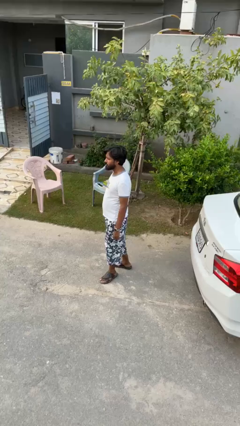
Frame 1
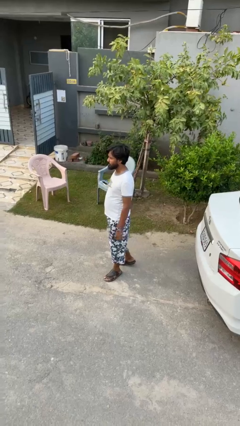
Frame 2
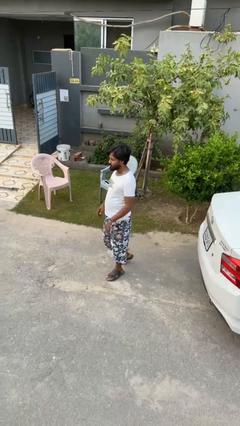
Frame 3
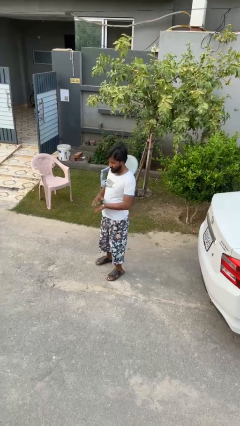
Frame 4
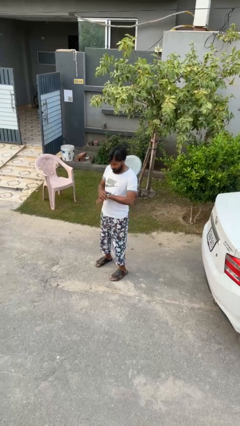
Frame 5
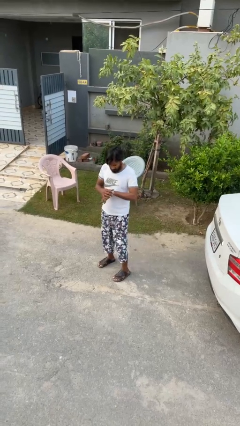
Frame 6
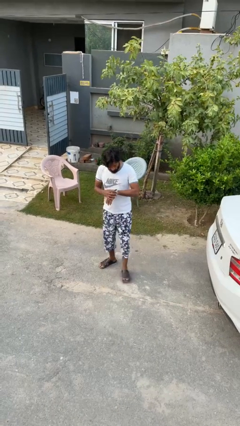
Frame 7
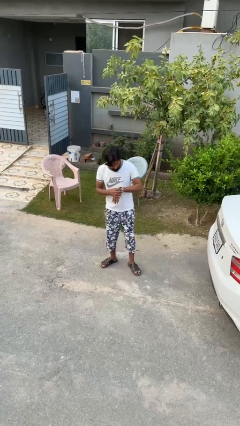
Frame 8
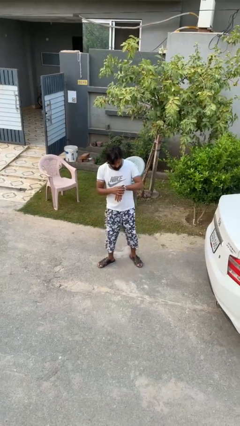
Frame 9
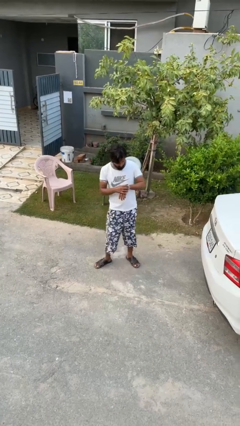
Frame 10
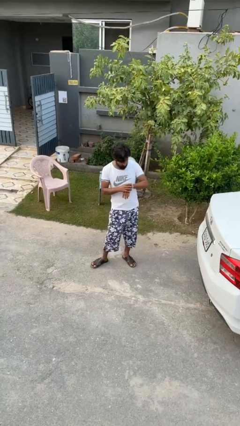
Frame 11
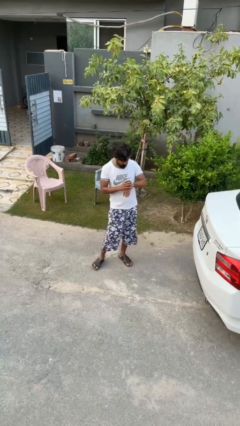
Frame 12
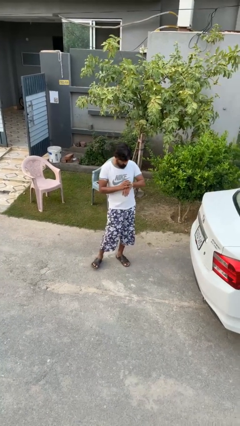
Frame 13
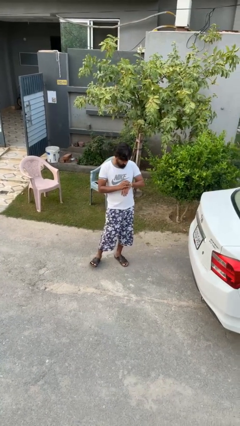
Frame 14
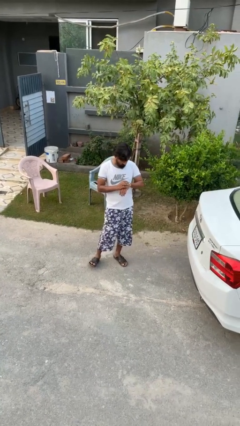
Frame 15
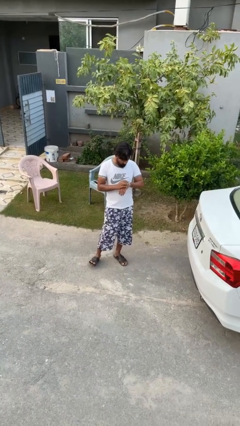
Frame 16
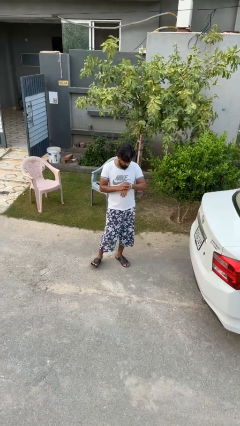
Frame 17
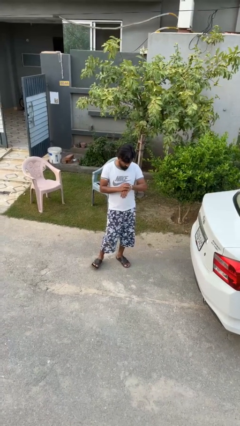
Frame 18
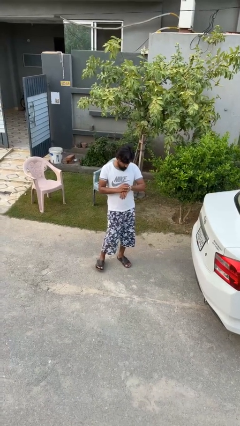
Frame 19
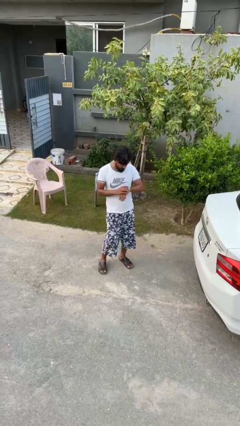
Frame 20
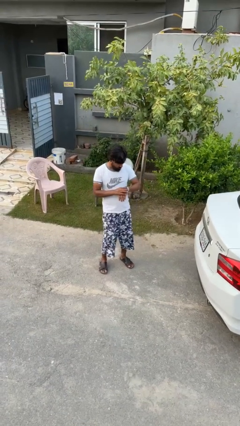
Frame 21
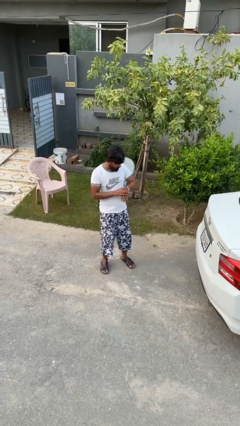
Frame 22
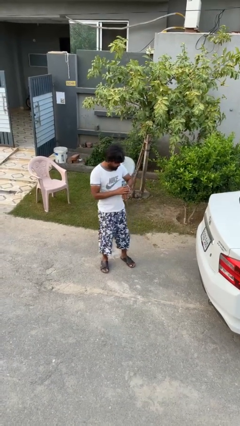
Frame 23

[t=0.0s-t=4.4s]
person looks at wristwatch

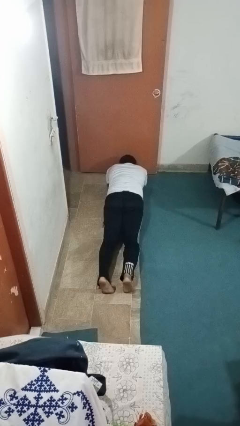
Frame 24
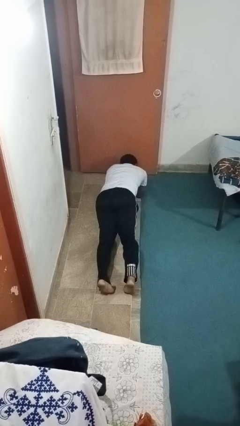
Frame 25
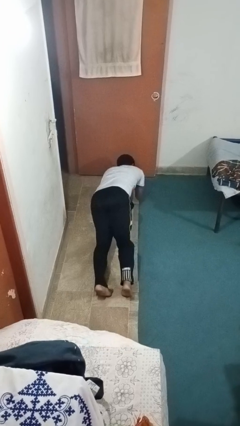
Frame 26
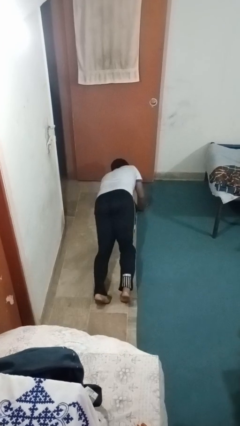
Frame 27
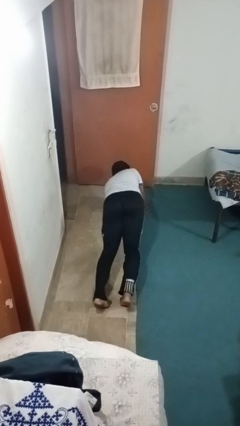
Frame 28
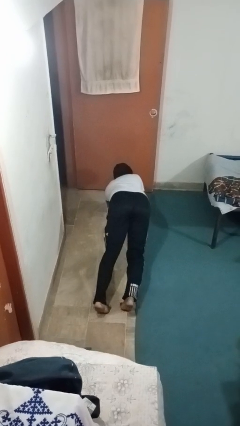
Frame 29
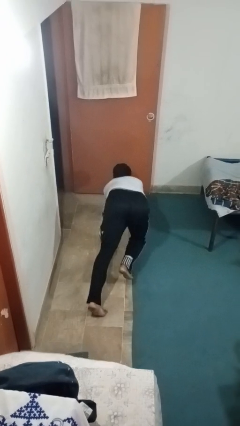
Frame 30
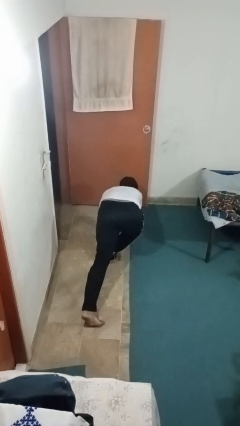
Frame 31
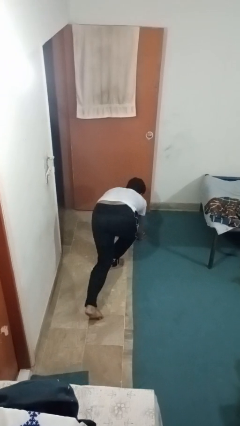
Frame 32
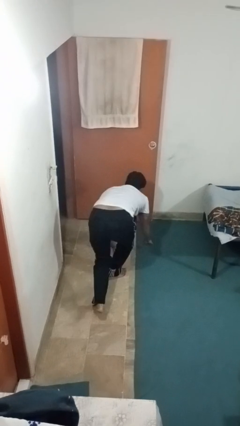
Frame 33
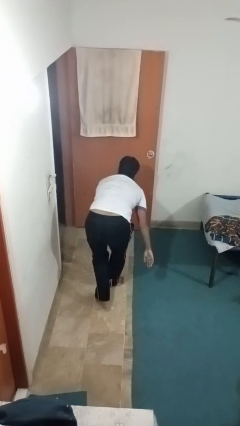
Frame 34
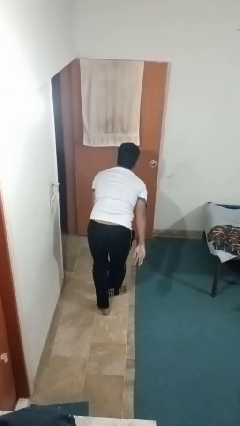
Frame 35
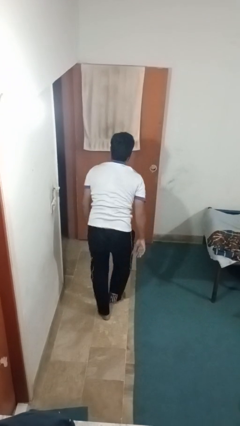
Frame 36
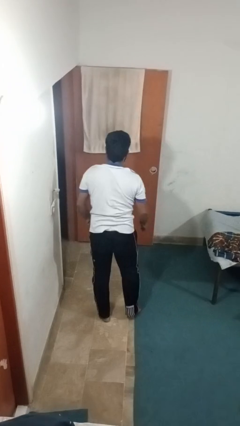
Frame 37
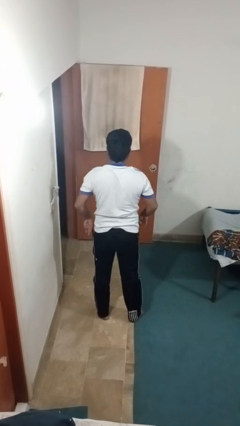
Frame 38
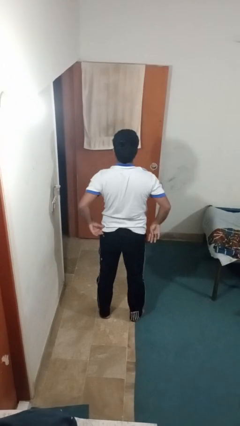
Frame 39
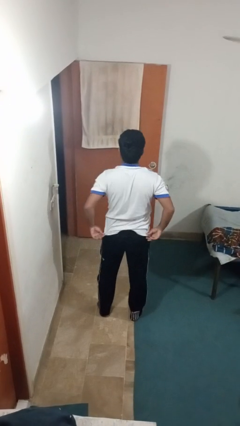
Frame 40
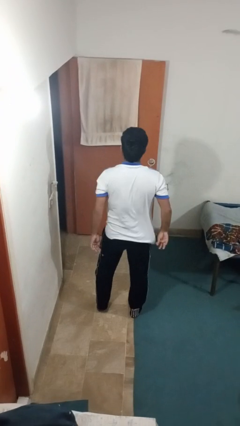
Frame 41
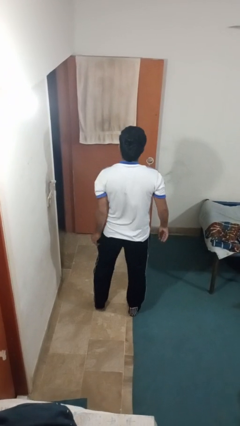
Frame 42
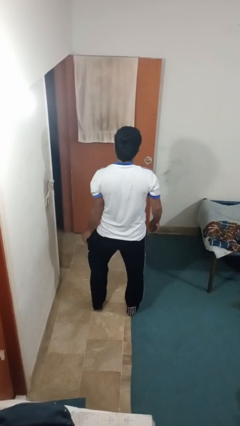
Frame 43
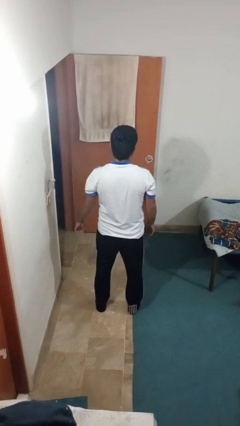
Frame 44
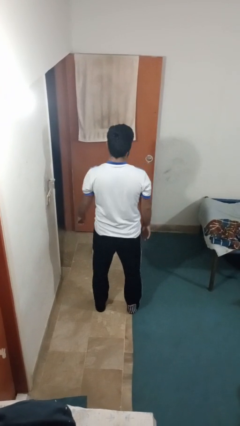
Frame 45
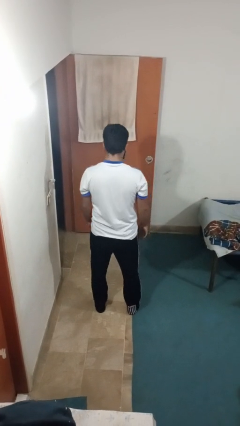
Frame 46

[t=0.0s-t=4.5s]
person stands up from floor

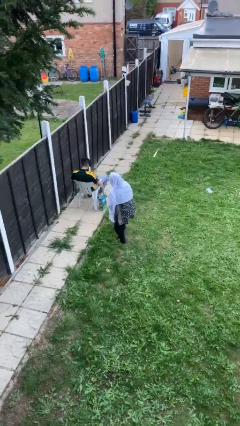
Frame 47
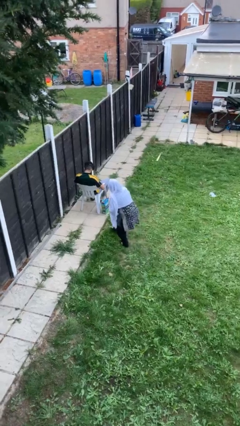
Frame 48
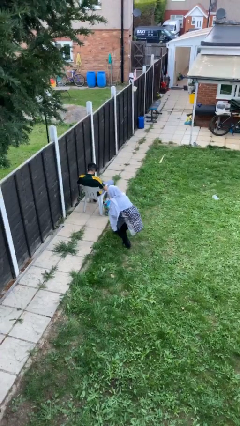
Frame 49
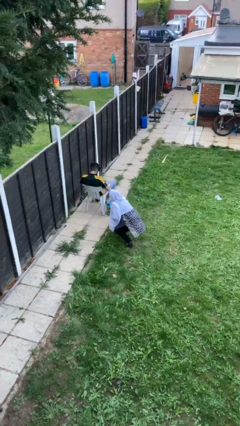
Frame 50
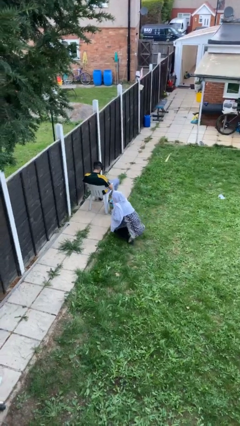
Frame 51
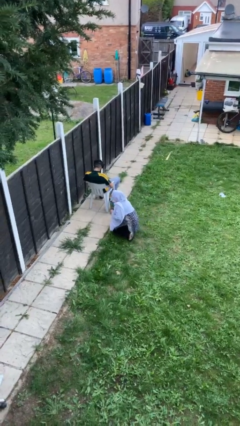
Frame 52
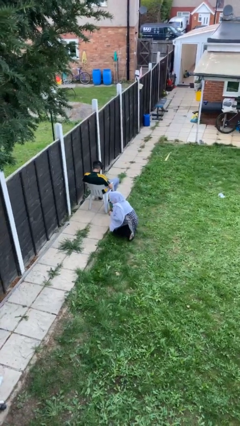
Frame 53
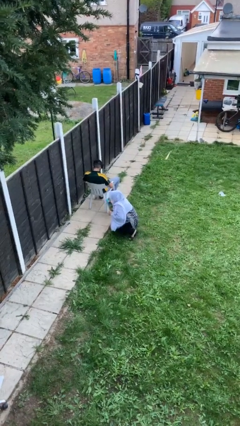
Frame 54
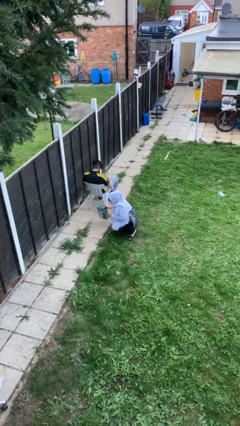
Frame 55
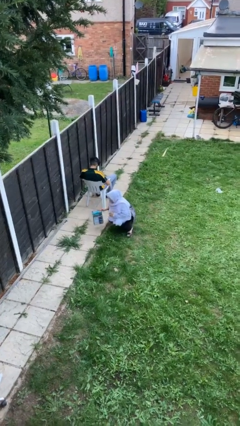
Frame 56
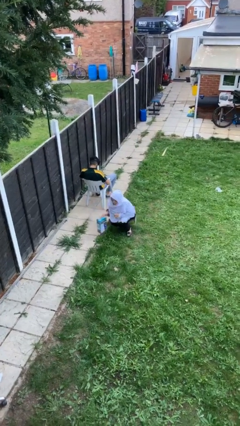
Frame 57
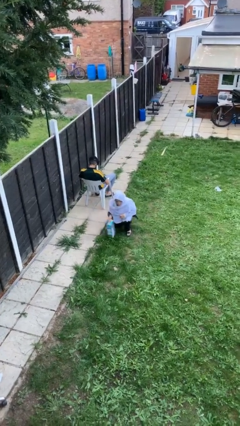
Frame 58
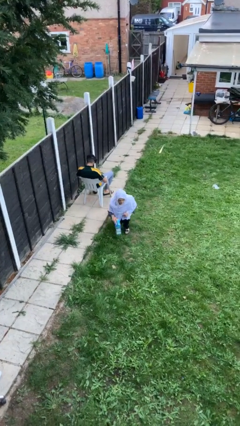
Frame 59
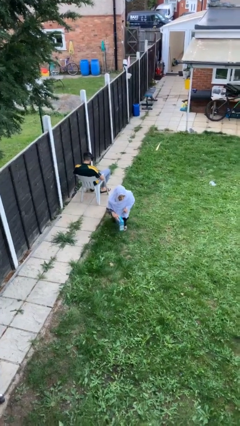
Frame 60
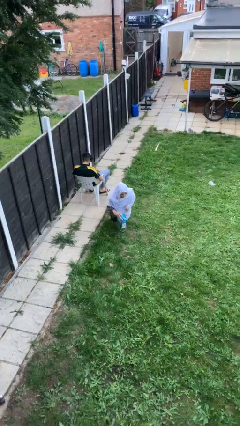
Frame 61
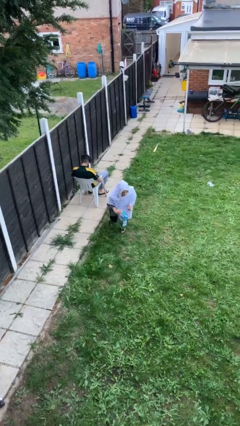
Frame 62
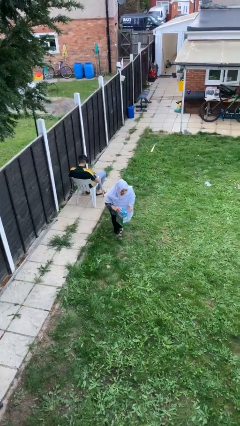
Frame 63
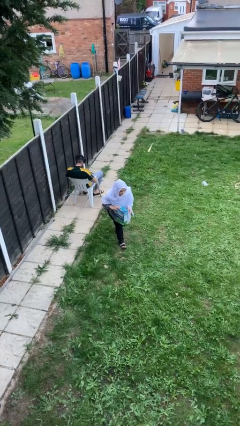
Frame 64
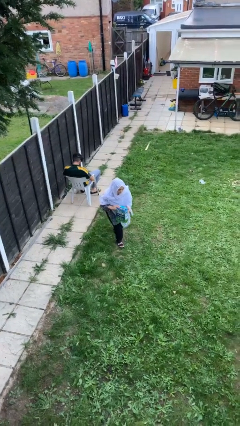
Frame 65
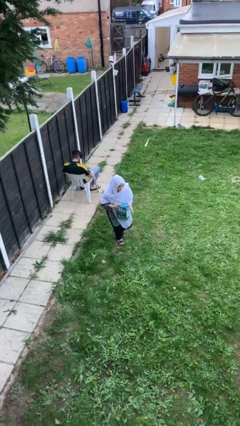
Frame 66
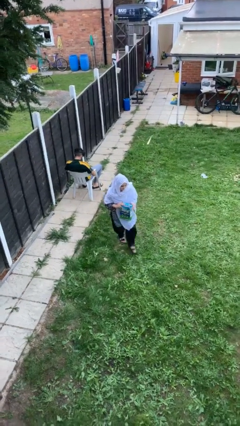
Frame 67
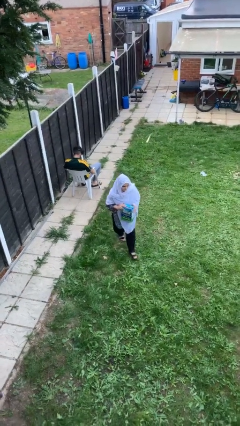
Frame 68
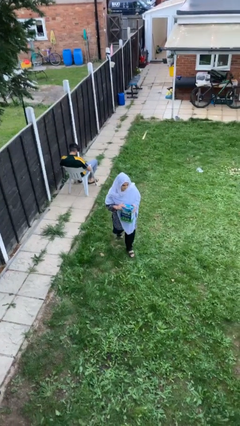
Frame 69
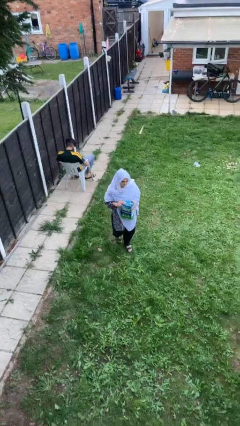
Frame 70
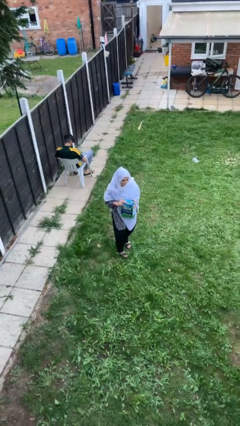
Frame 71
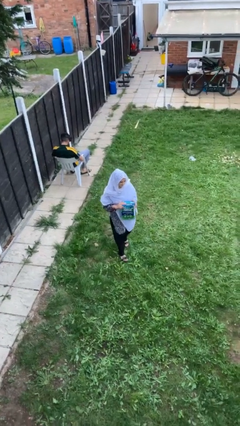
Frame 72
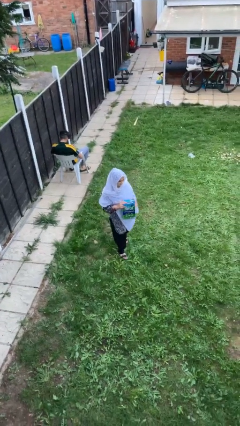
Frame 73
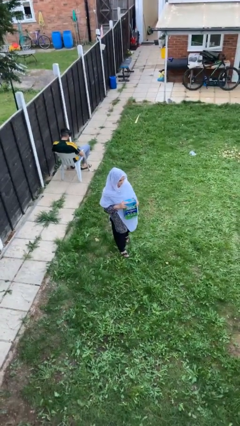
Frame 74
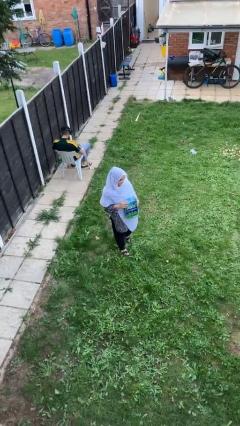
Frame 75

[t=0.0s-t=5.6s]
person steals object from person

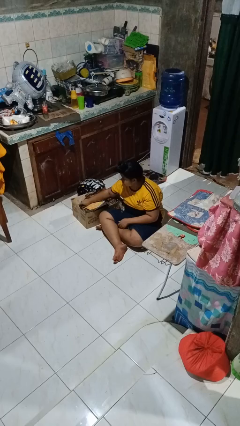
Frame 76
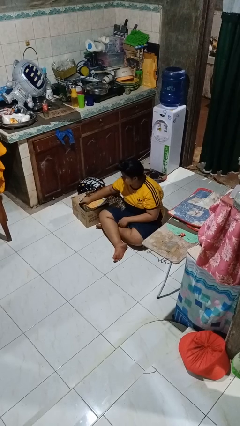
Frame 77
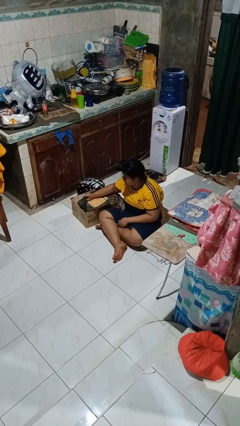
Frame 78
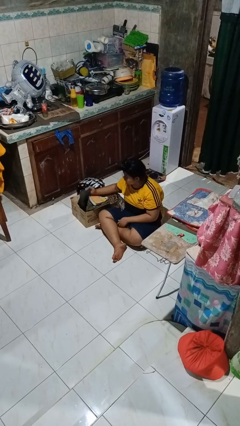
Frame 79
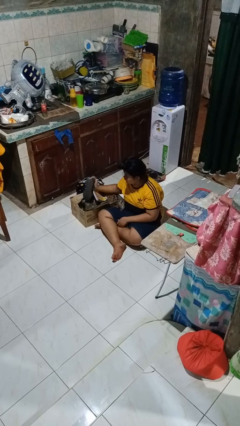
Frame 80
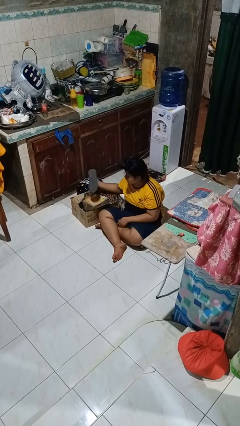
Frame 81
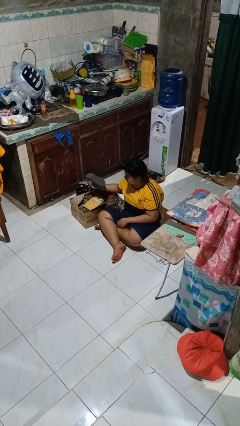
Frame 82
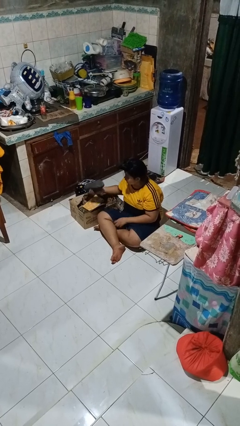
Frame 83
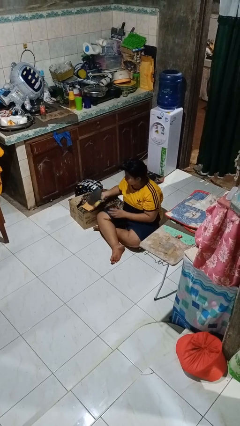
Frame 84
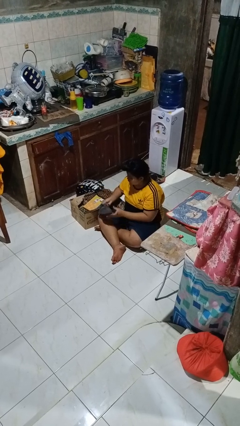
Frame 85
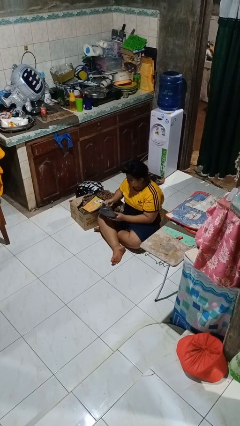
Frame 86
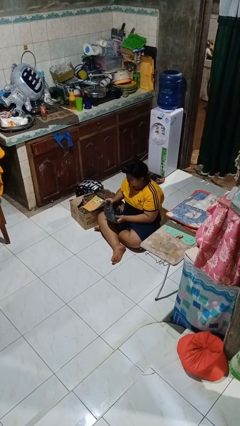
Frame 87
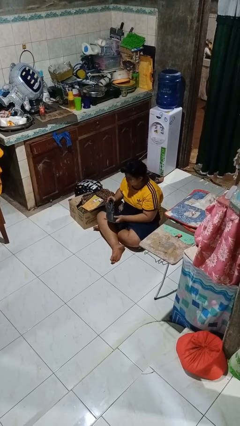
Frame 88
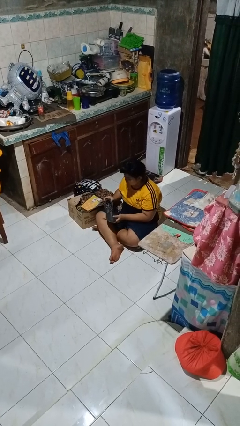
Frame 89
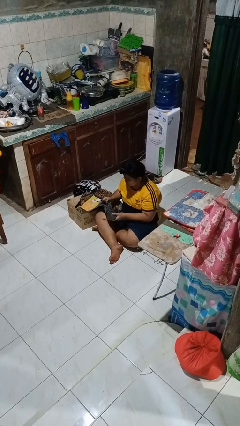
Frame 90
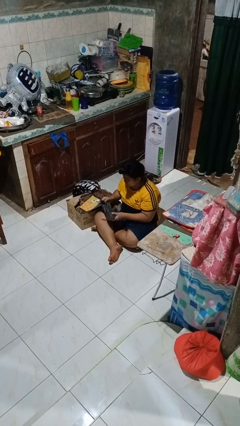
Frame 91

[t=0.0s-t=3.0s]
person takes object from box

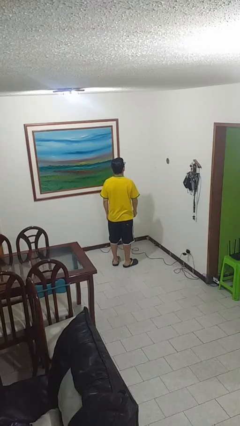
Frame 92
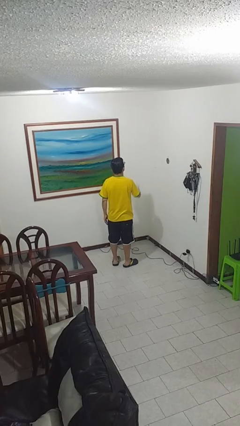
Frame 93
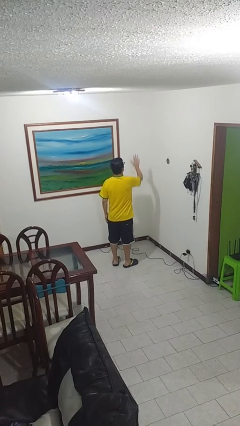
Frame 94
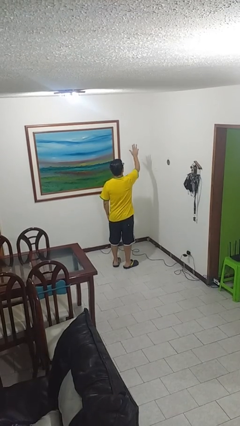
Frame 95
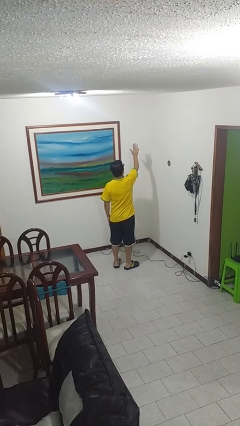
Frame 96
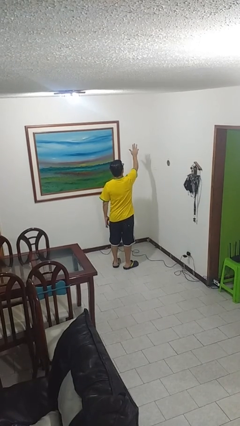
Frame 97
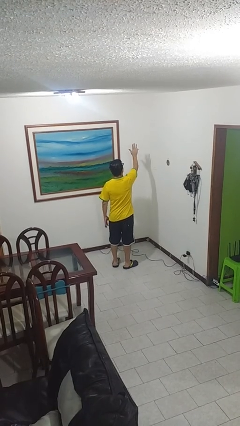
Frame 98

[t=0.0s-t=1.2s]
person gestures number four
